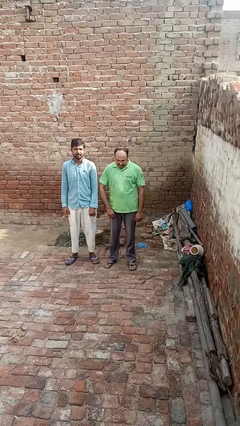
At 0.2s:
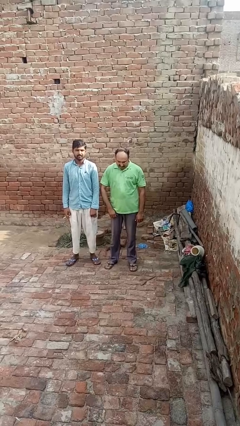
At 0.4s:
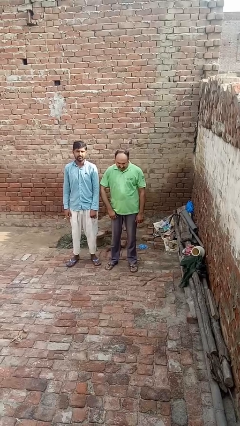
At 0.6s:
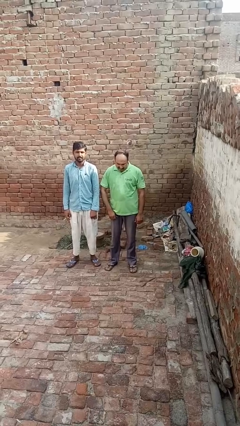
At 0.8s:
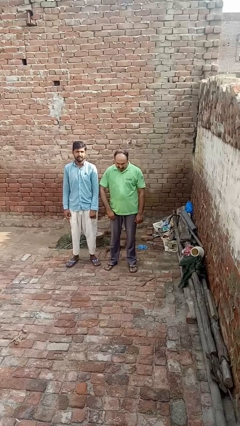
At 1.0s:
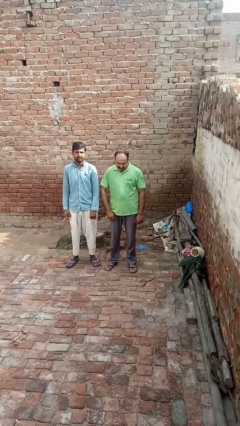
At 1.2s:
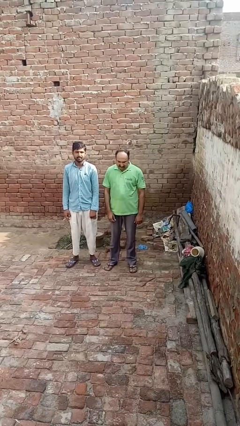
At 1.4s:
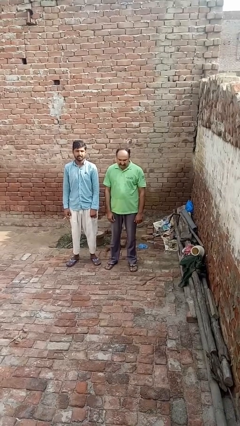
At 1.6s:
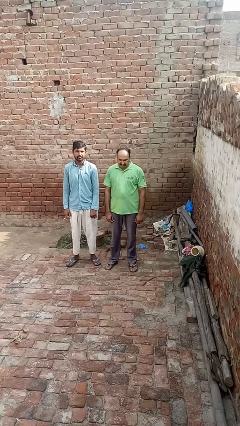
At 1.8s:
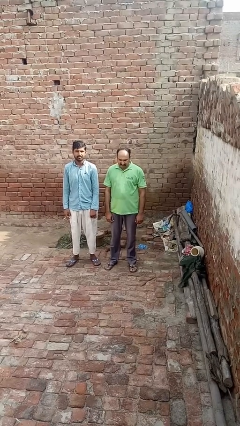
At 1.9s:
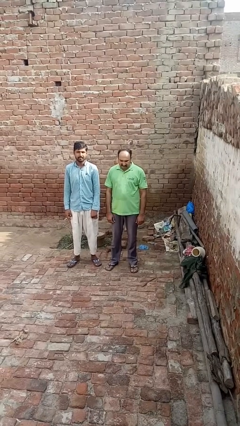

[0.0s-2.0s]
person nudges person with elbow

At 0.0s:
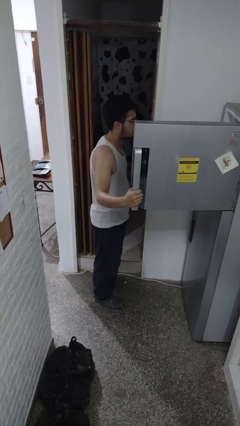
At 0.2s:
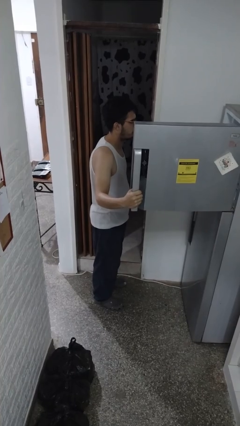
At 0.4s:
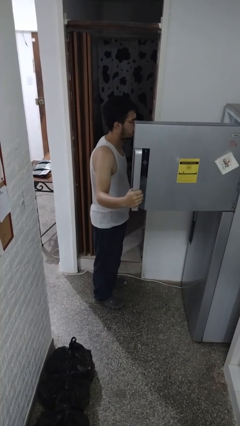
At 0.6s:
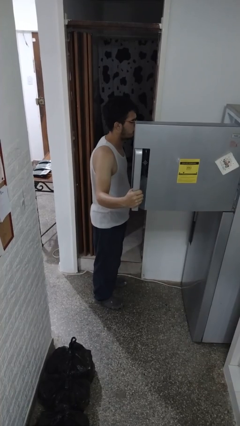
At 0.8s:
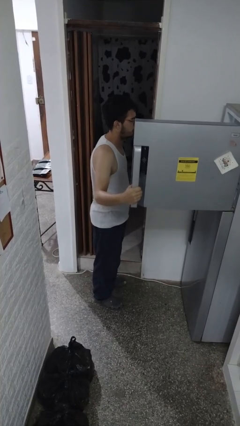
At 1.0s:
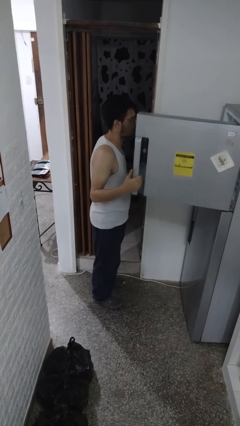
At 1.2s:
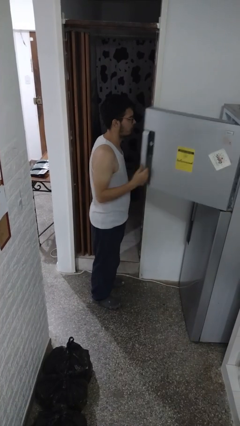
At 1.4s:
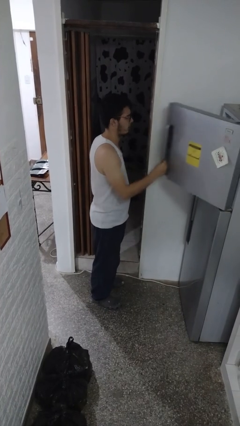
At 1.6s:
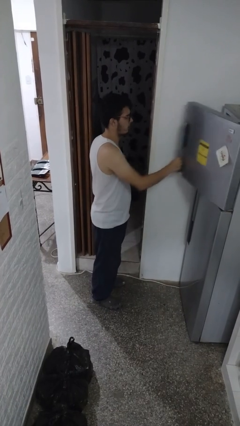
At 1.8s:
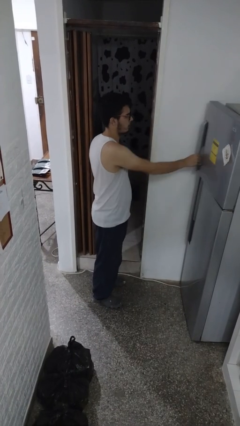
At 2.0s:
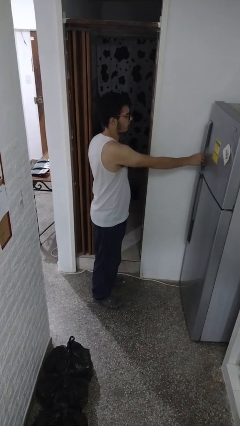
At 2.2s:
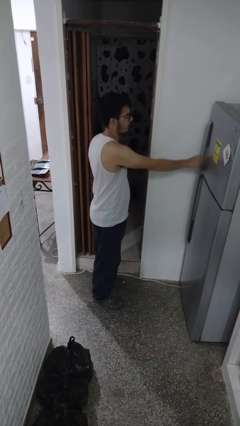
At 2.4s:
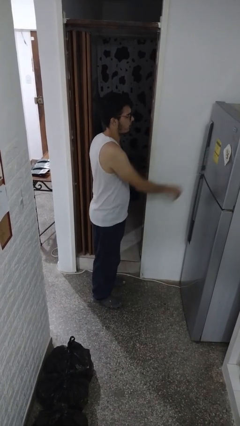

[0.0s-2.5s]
person closes refrigerator

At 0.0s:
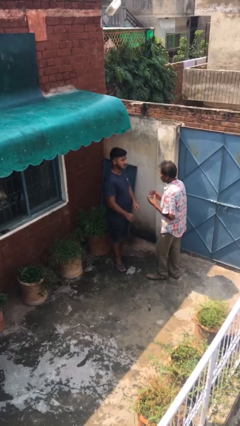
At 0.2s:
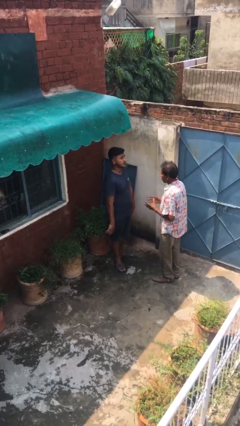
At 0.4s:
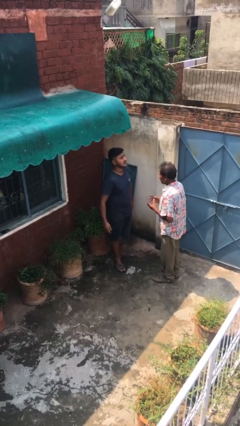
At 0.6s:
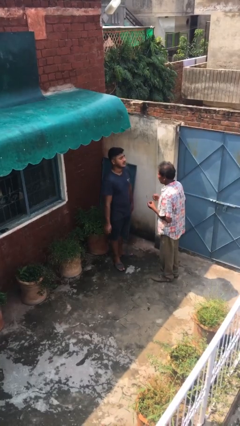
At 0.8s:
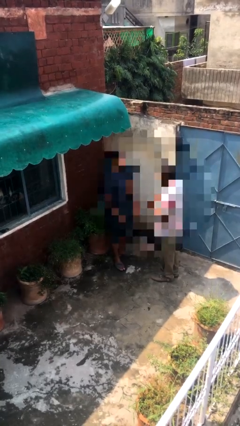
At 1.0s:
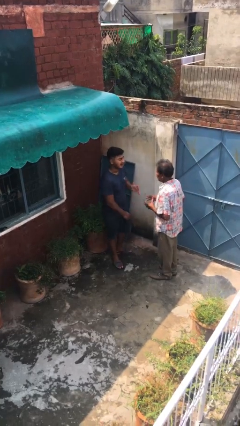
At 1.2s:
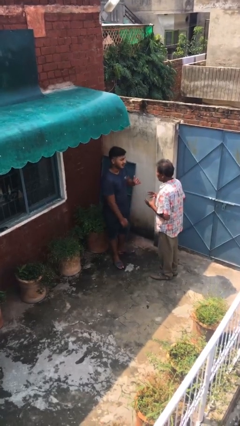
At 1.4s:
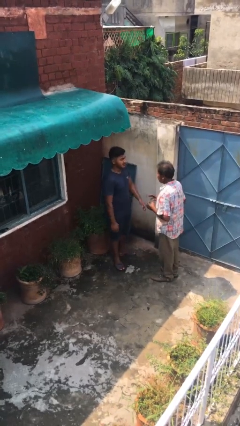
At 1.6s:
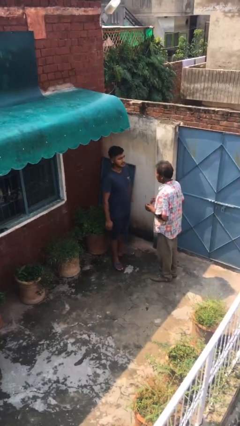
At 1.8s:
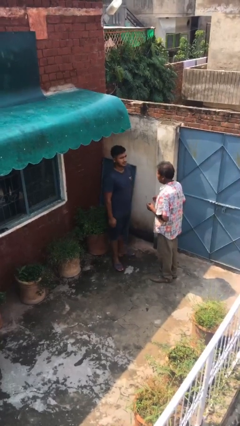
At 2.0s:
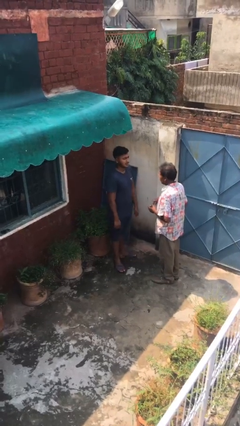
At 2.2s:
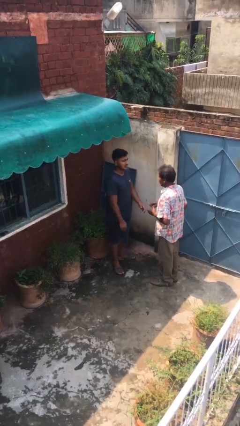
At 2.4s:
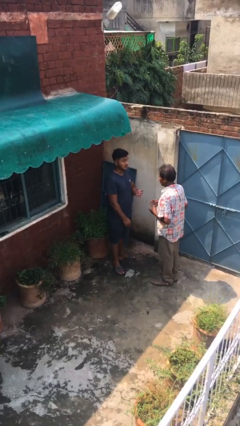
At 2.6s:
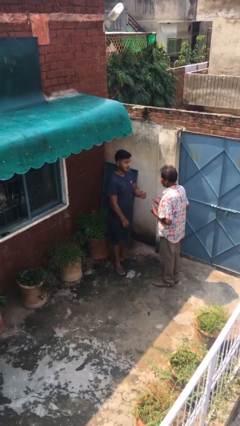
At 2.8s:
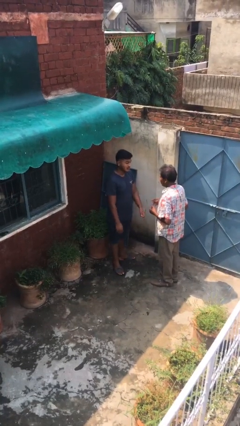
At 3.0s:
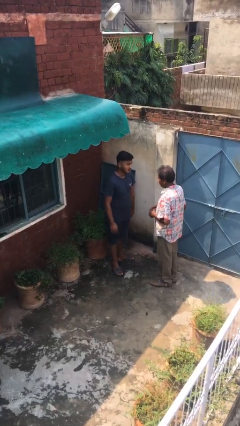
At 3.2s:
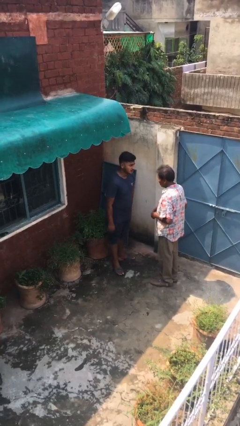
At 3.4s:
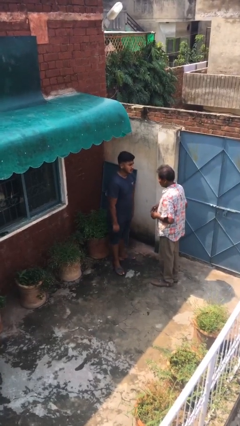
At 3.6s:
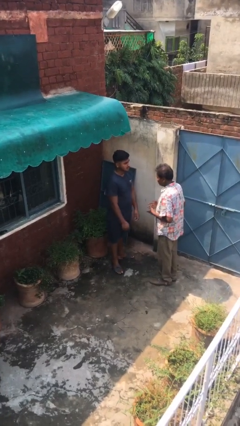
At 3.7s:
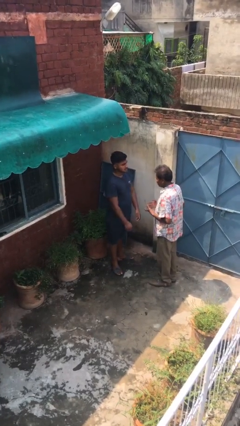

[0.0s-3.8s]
person talks to person

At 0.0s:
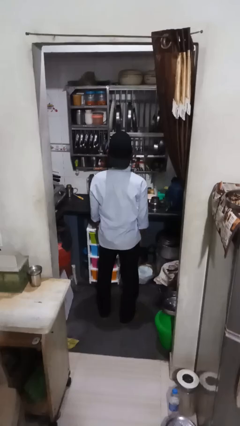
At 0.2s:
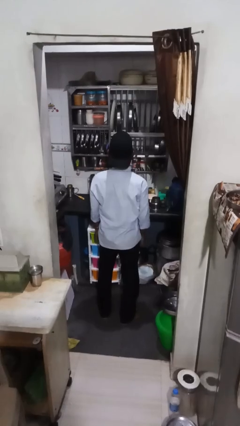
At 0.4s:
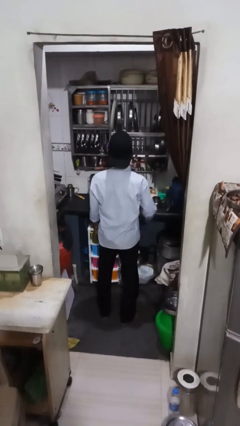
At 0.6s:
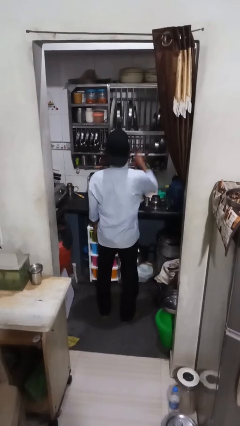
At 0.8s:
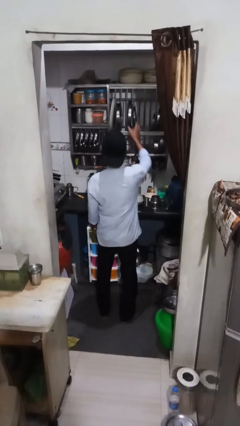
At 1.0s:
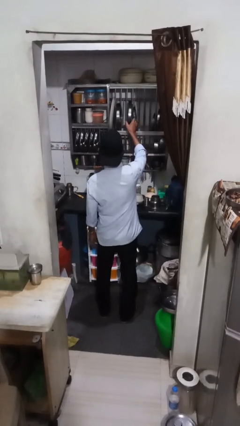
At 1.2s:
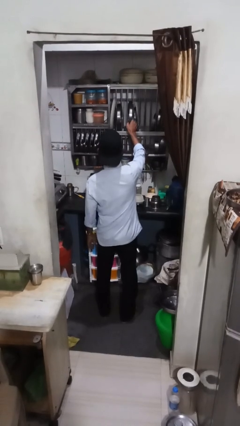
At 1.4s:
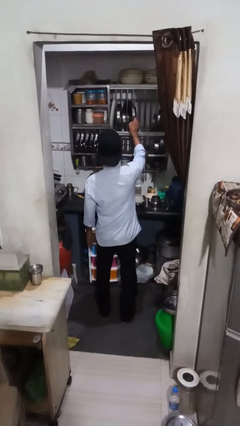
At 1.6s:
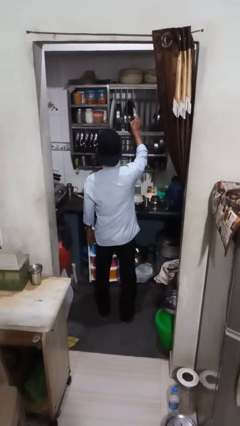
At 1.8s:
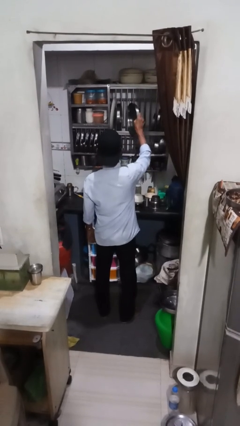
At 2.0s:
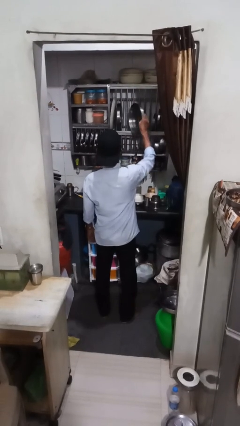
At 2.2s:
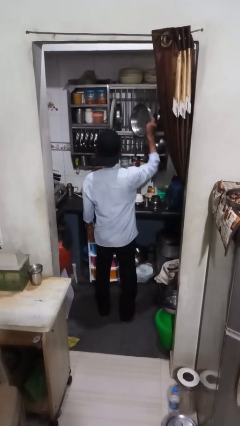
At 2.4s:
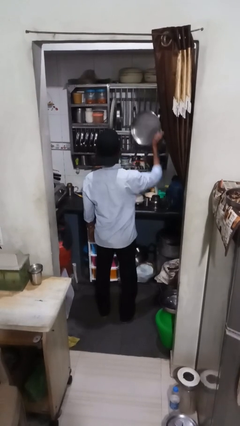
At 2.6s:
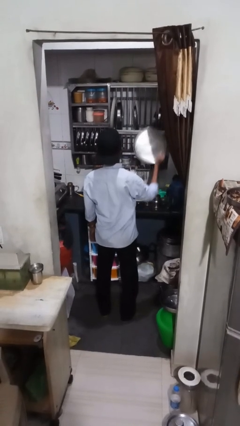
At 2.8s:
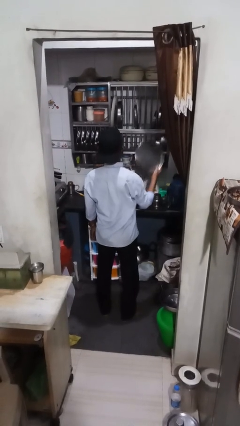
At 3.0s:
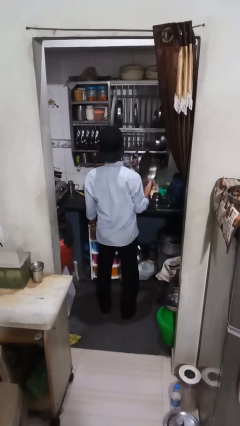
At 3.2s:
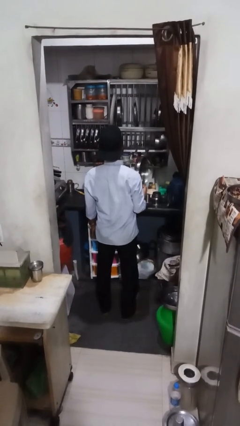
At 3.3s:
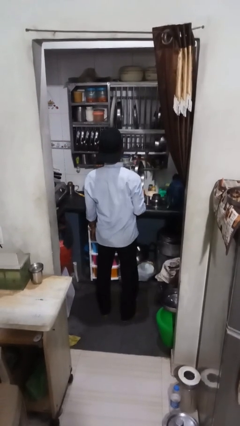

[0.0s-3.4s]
person takes object from cabinet

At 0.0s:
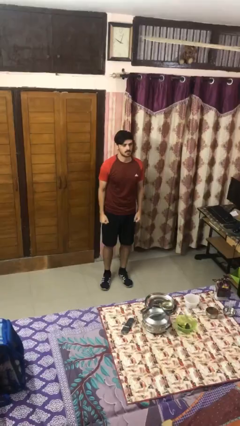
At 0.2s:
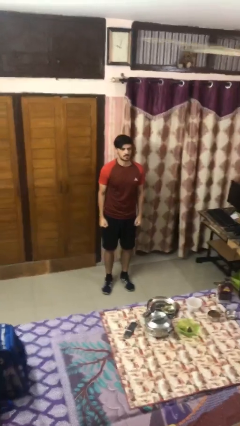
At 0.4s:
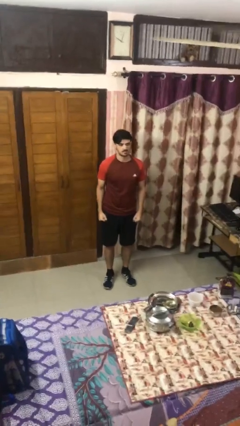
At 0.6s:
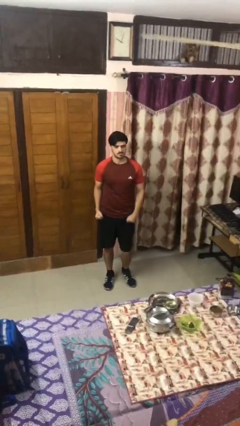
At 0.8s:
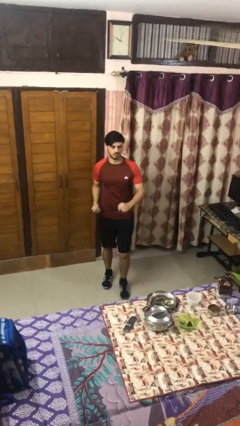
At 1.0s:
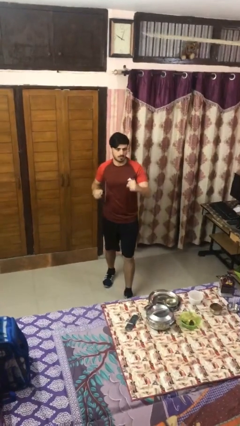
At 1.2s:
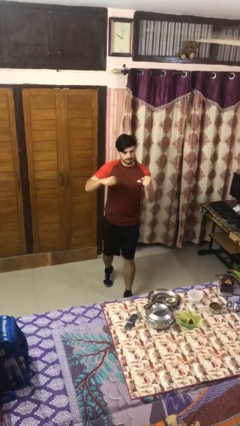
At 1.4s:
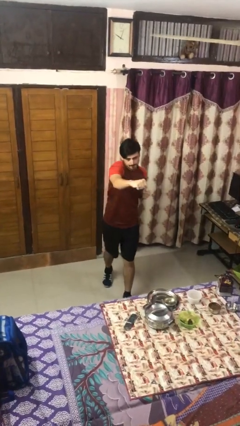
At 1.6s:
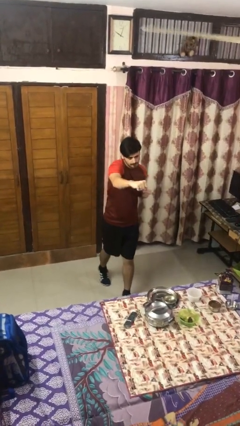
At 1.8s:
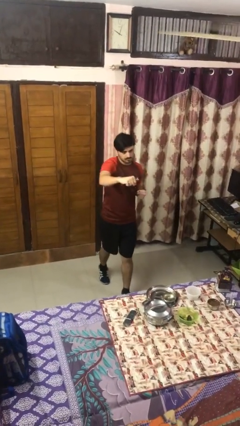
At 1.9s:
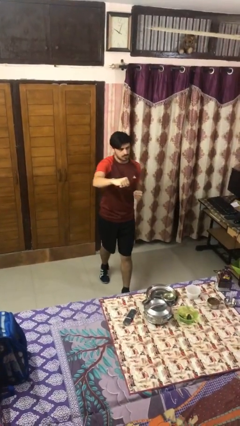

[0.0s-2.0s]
person punches

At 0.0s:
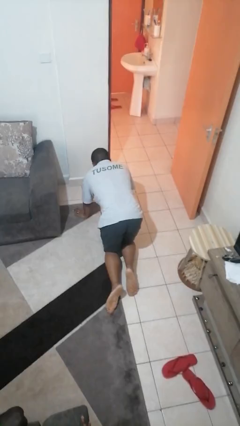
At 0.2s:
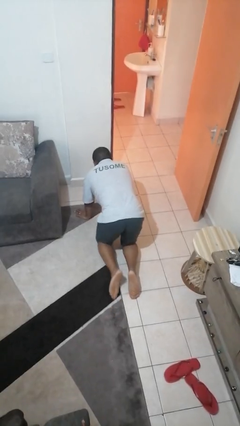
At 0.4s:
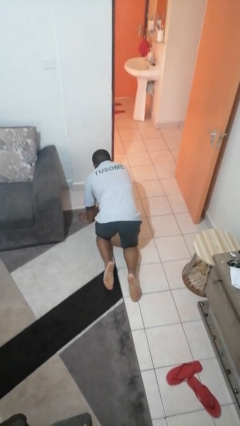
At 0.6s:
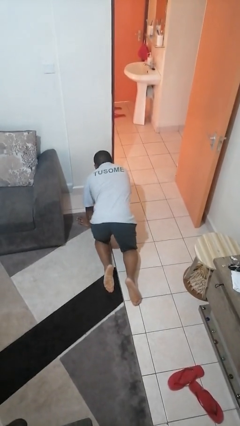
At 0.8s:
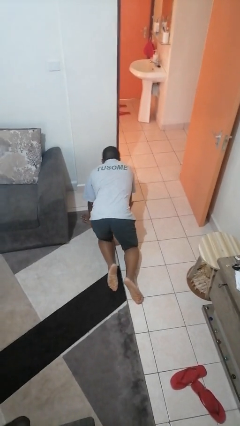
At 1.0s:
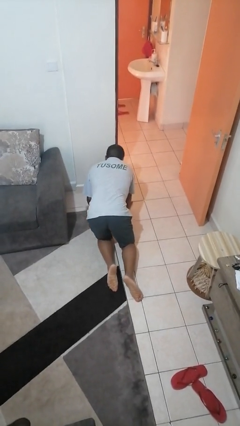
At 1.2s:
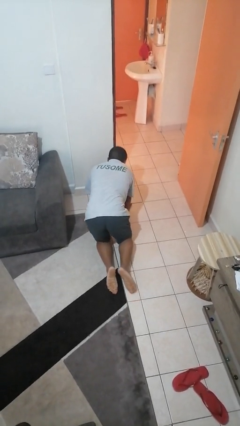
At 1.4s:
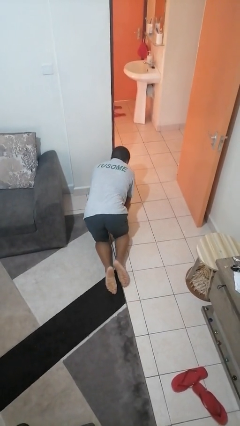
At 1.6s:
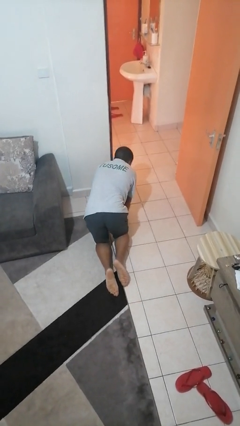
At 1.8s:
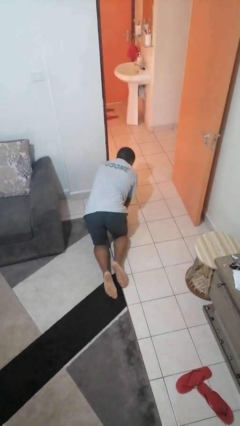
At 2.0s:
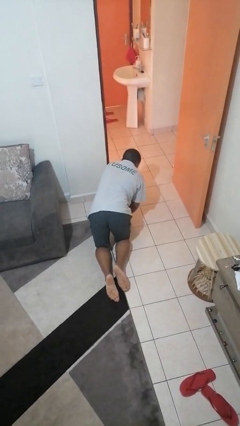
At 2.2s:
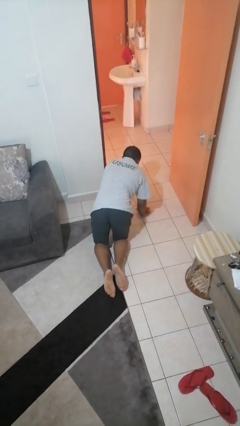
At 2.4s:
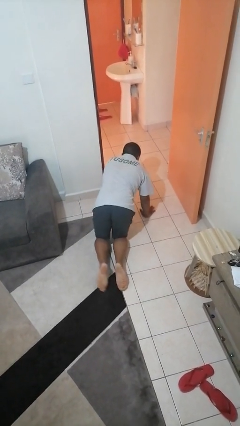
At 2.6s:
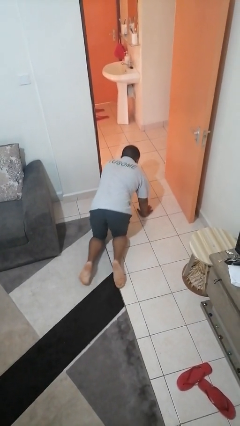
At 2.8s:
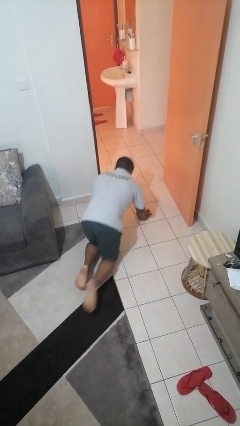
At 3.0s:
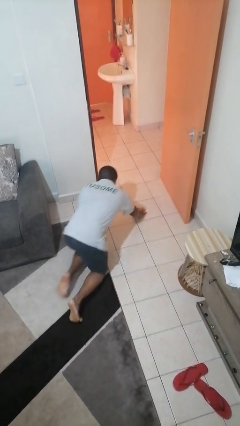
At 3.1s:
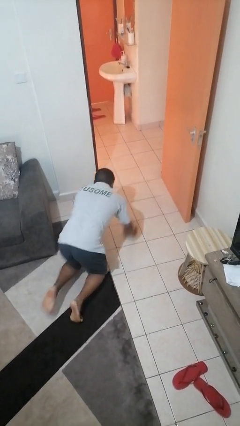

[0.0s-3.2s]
person crawls

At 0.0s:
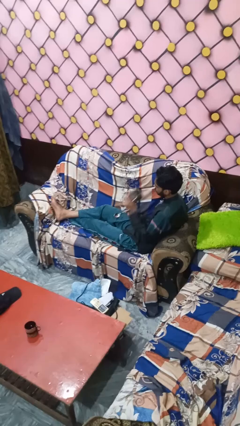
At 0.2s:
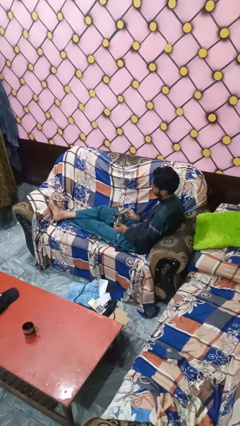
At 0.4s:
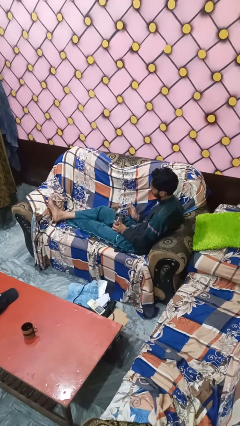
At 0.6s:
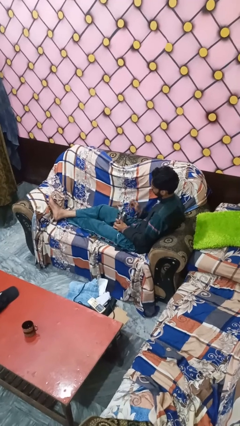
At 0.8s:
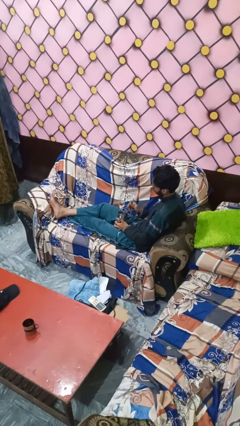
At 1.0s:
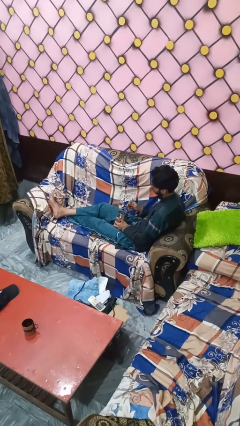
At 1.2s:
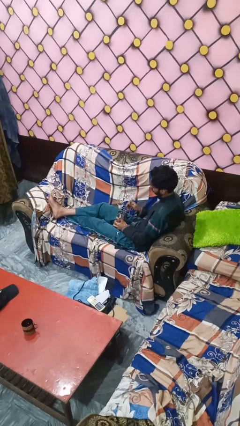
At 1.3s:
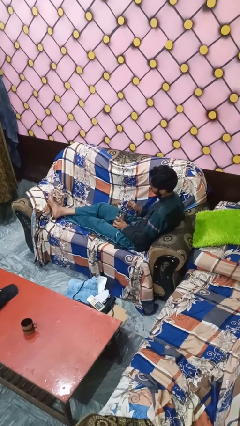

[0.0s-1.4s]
person stirs mug
